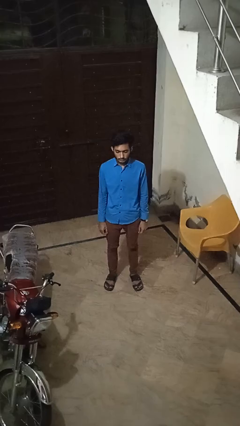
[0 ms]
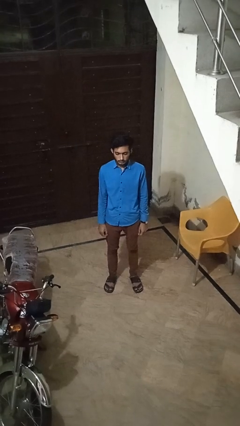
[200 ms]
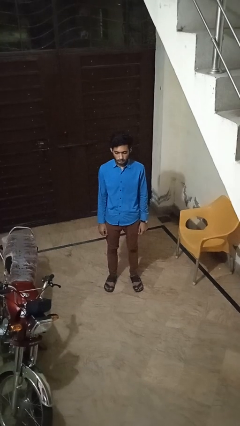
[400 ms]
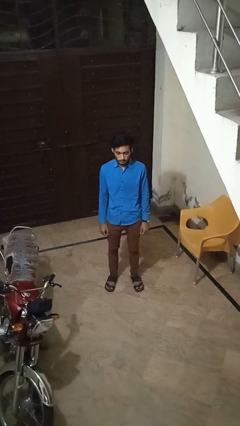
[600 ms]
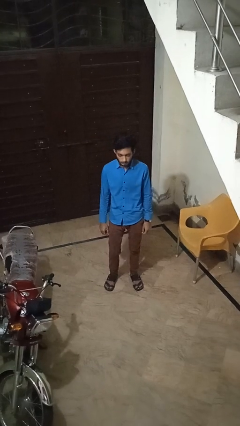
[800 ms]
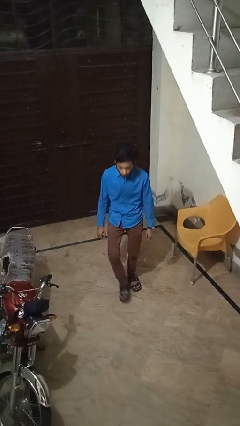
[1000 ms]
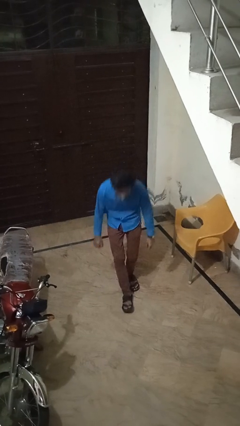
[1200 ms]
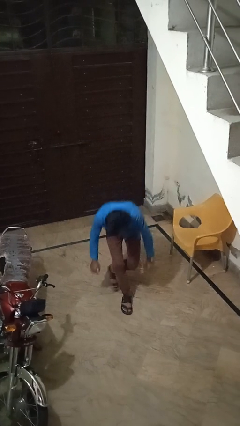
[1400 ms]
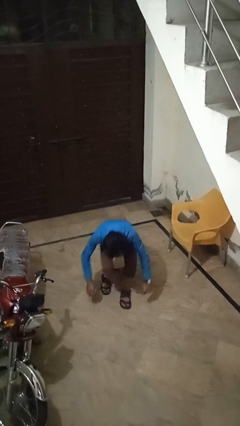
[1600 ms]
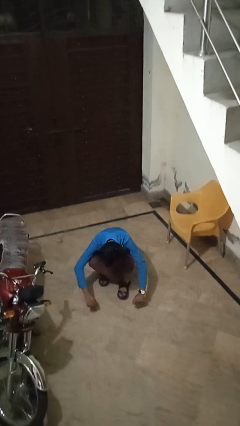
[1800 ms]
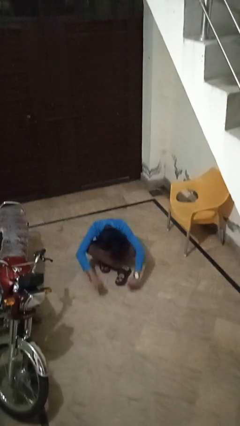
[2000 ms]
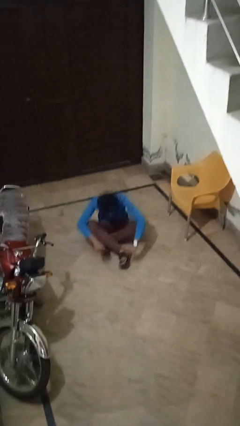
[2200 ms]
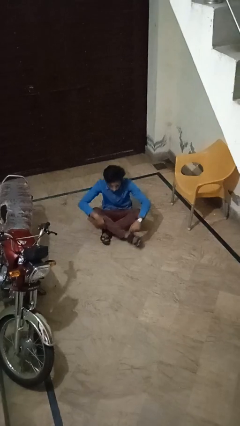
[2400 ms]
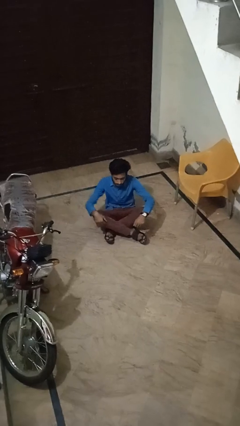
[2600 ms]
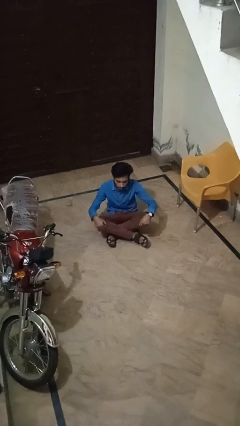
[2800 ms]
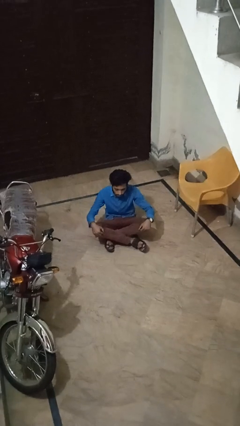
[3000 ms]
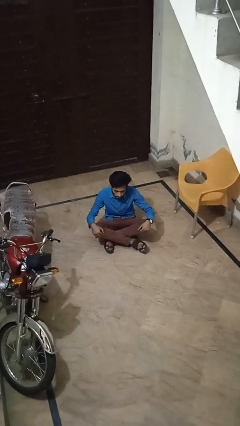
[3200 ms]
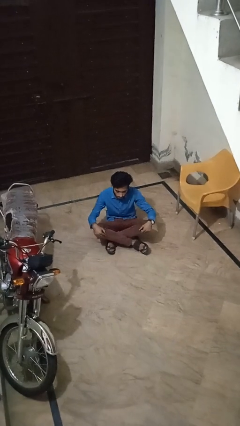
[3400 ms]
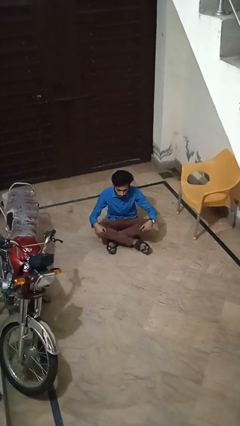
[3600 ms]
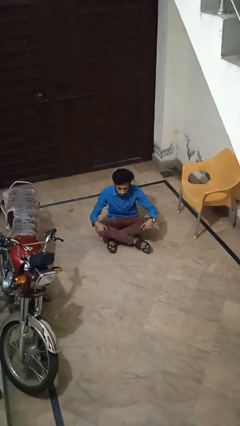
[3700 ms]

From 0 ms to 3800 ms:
person sits crisscross

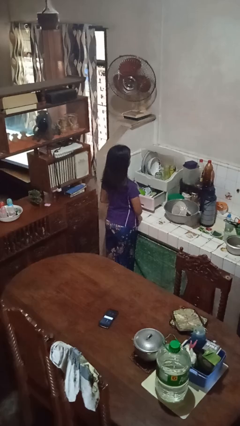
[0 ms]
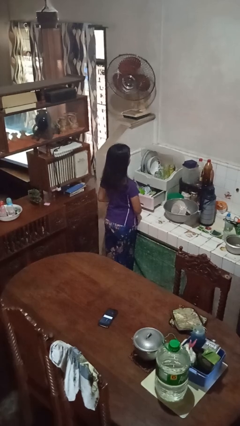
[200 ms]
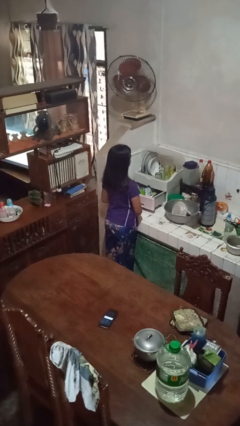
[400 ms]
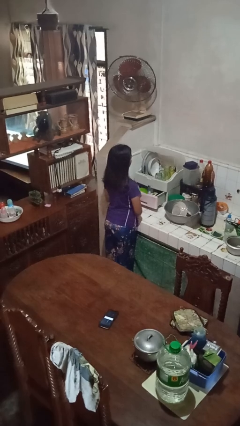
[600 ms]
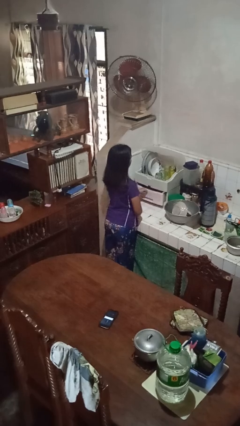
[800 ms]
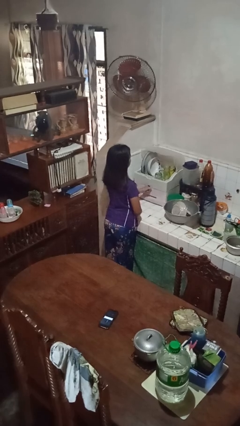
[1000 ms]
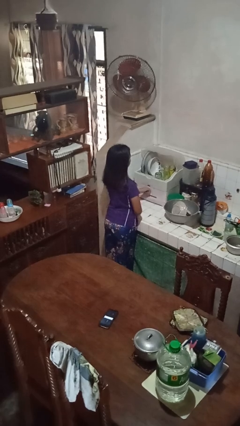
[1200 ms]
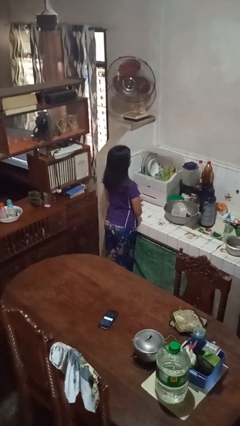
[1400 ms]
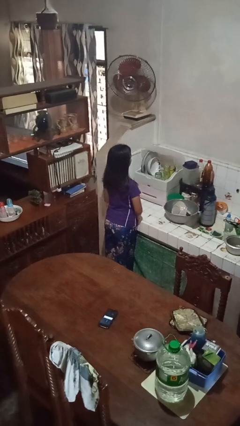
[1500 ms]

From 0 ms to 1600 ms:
person closes kitchen drawer

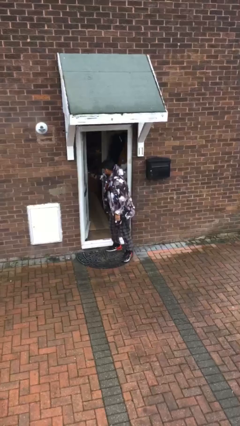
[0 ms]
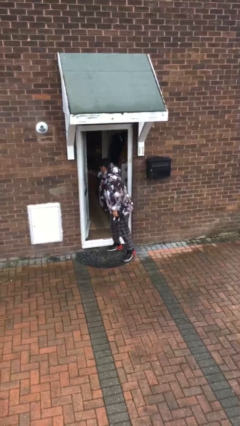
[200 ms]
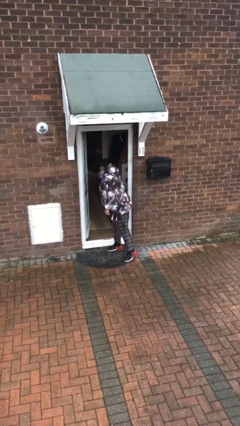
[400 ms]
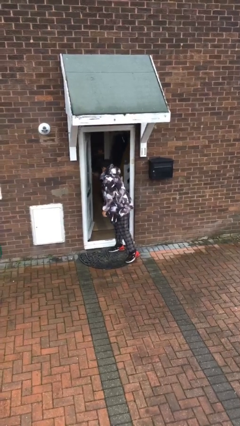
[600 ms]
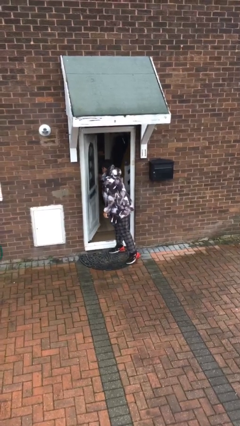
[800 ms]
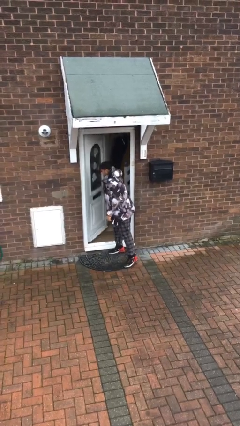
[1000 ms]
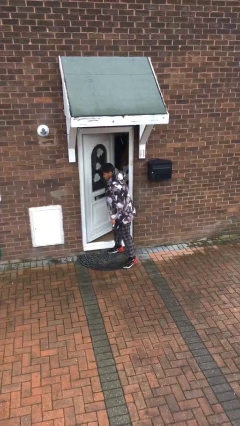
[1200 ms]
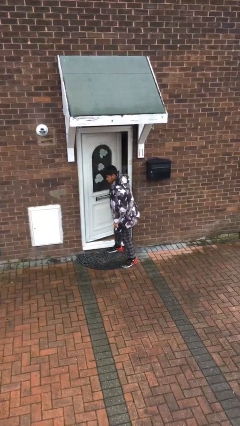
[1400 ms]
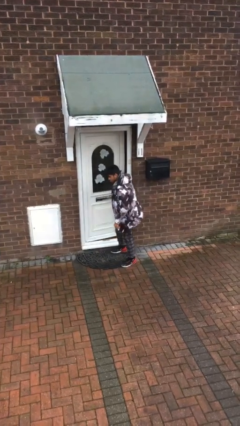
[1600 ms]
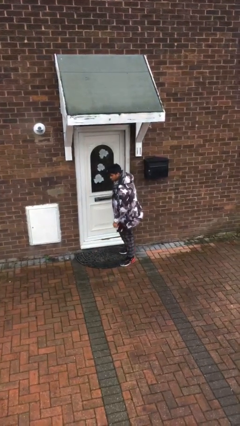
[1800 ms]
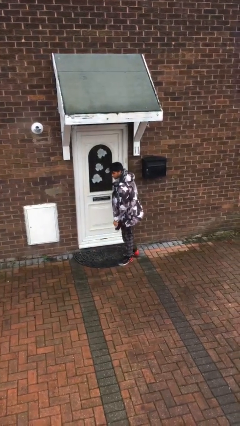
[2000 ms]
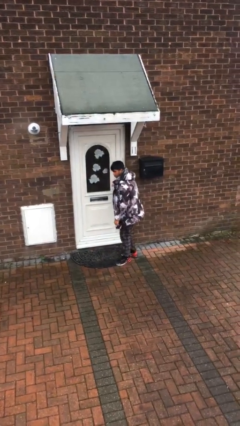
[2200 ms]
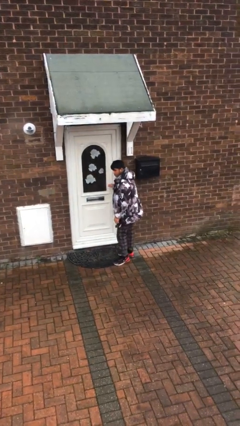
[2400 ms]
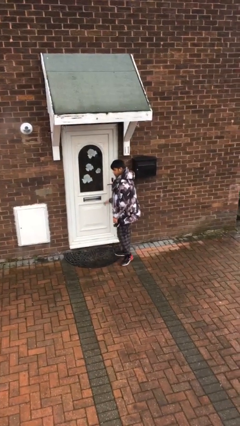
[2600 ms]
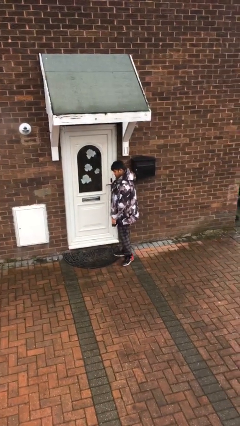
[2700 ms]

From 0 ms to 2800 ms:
person closes facility door

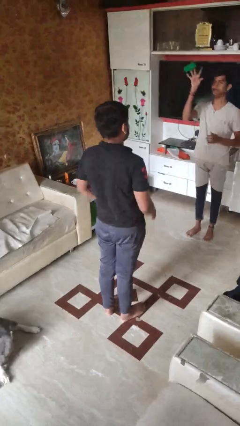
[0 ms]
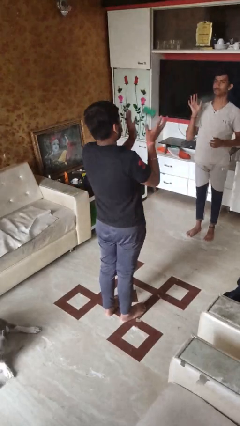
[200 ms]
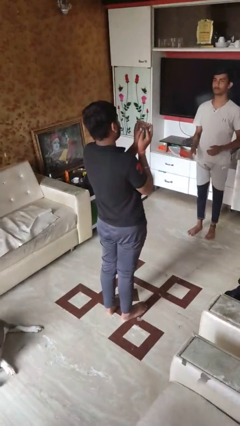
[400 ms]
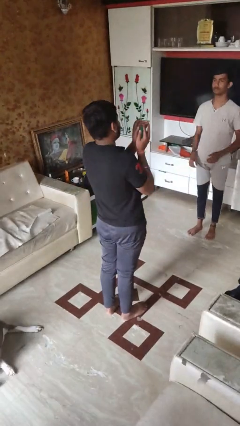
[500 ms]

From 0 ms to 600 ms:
person catches object from person

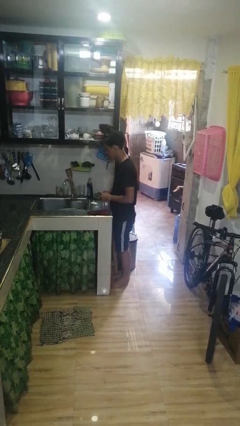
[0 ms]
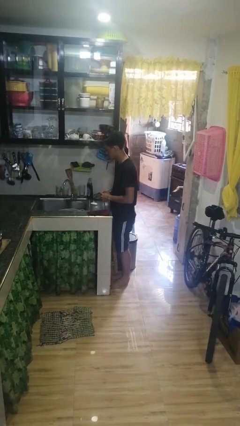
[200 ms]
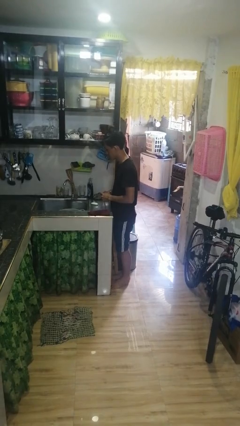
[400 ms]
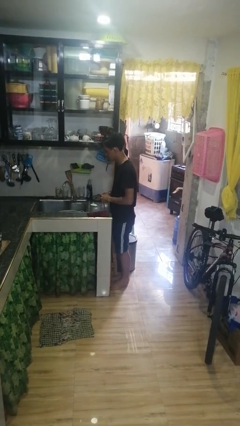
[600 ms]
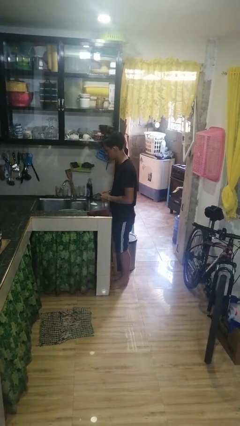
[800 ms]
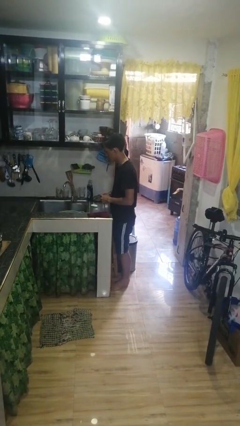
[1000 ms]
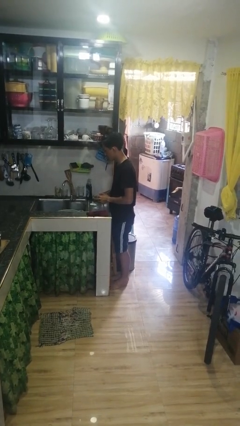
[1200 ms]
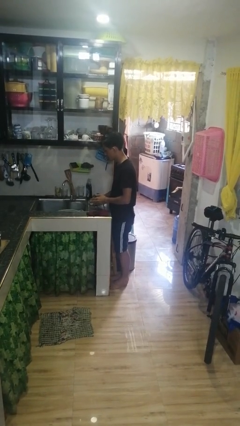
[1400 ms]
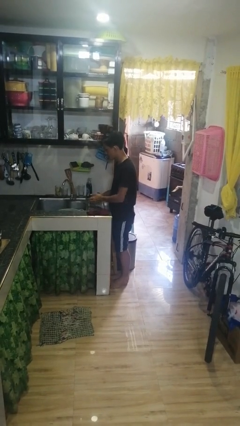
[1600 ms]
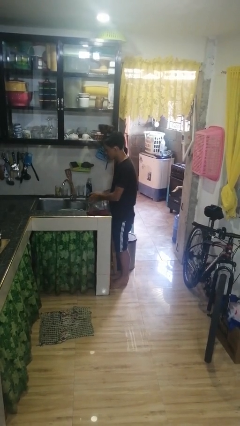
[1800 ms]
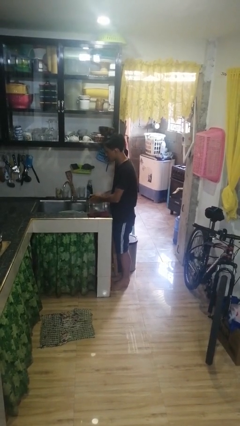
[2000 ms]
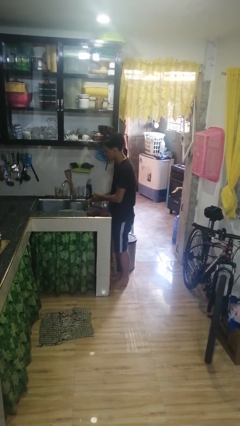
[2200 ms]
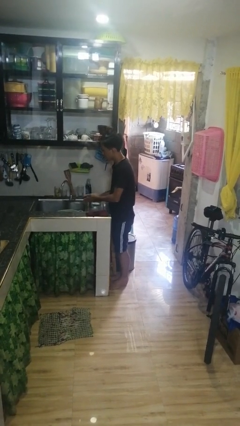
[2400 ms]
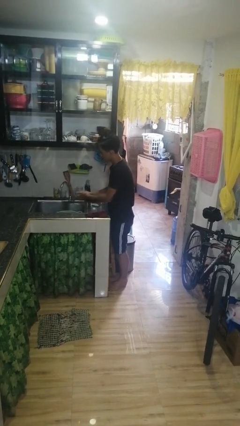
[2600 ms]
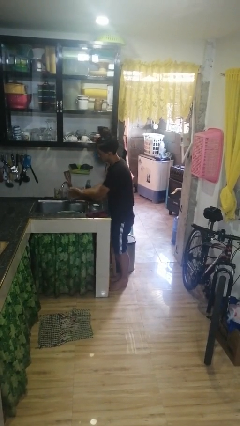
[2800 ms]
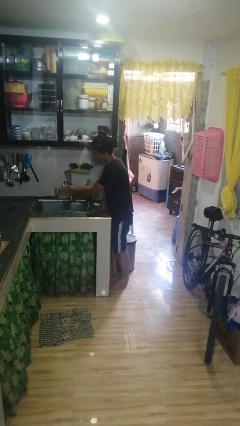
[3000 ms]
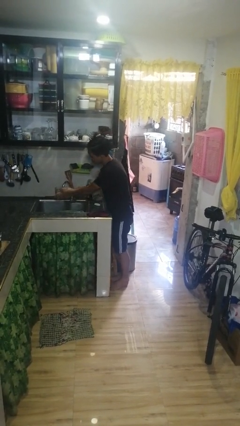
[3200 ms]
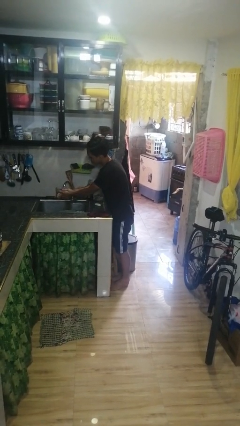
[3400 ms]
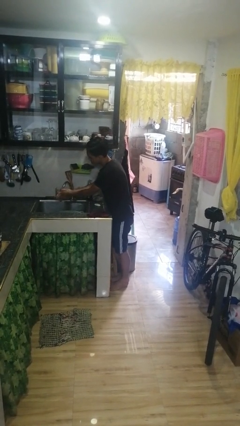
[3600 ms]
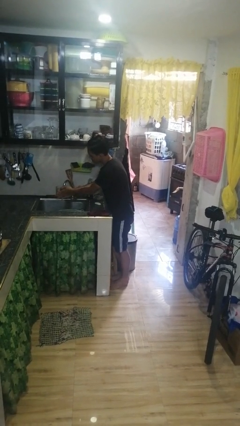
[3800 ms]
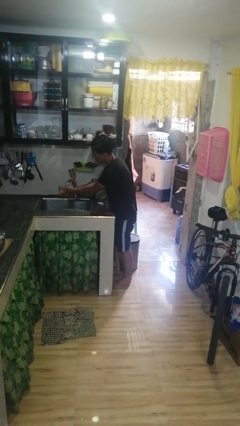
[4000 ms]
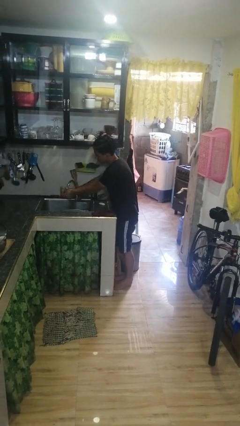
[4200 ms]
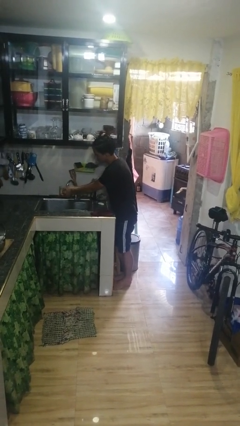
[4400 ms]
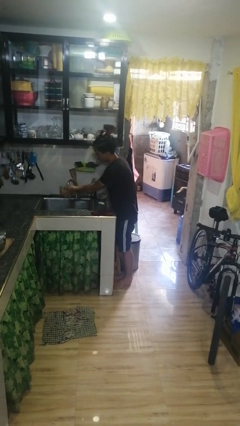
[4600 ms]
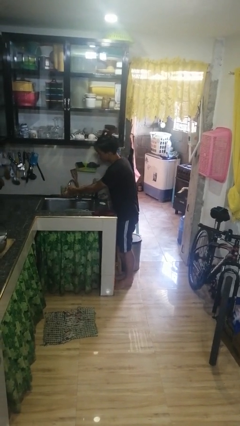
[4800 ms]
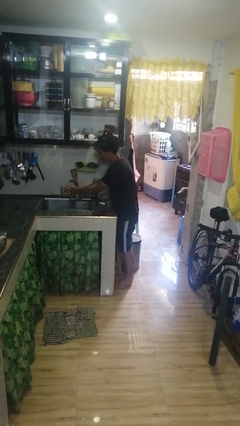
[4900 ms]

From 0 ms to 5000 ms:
person washes hands

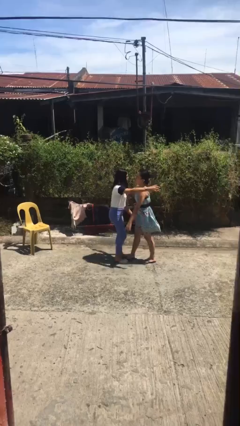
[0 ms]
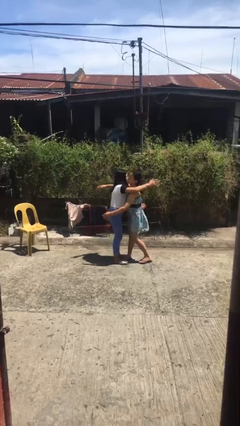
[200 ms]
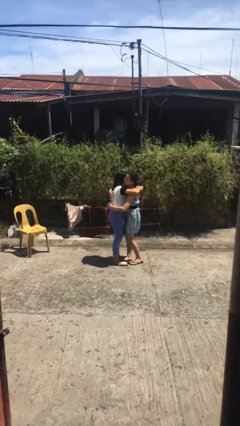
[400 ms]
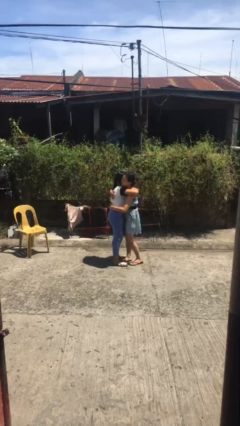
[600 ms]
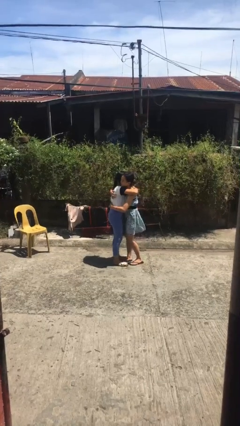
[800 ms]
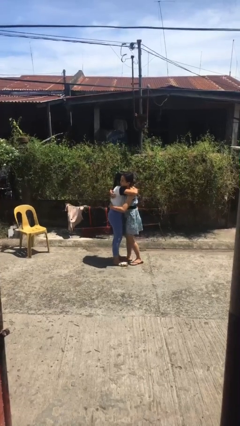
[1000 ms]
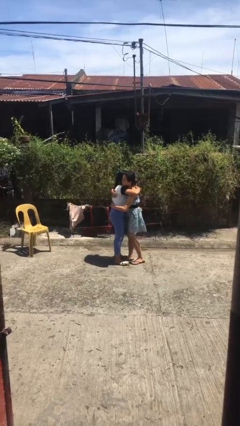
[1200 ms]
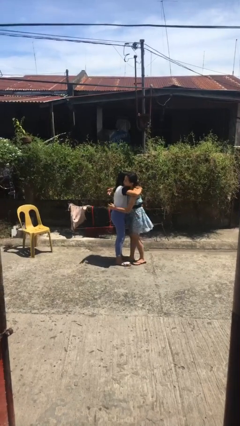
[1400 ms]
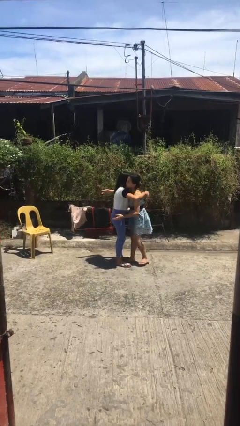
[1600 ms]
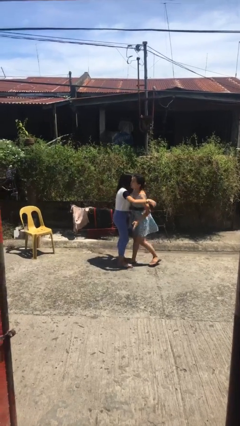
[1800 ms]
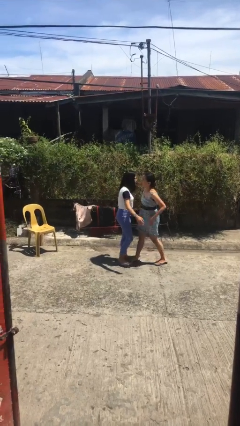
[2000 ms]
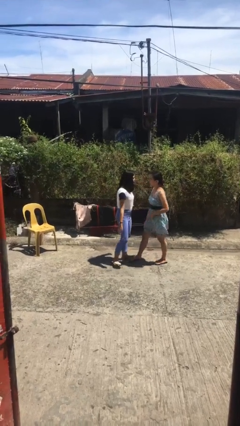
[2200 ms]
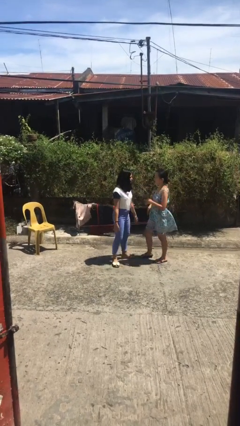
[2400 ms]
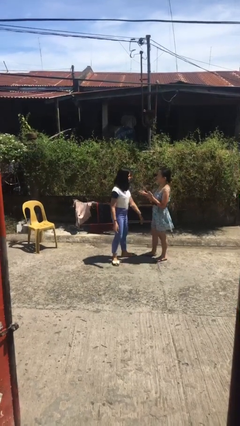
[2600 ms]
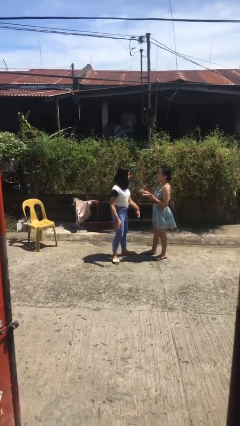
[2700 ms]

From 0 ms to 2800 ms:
person embraces person

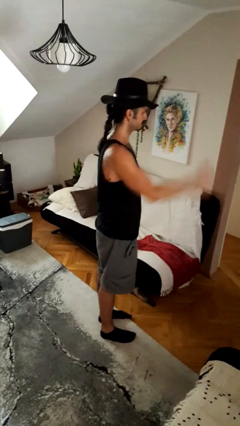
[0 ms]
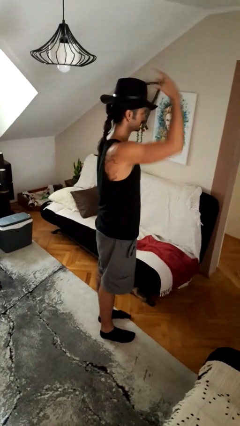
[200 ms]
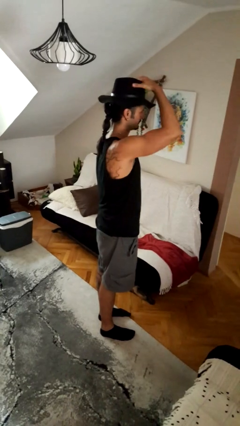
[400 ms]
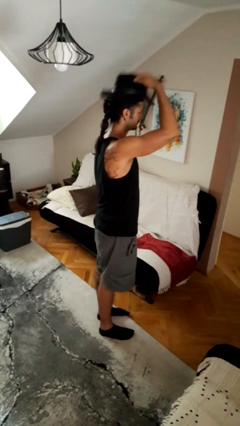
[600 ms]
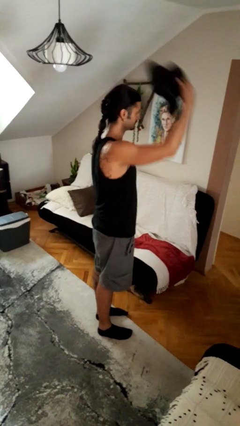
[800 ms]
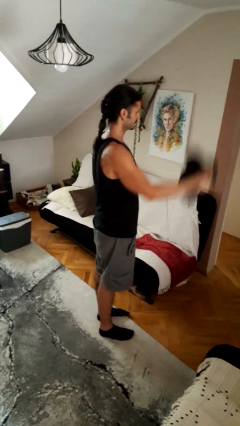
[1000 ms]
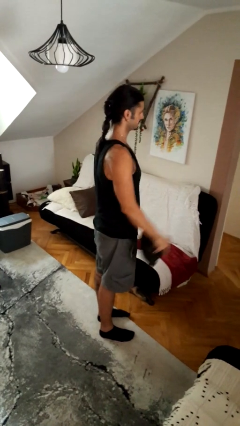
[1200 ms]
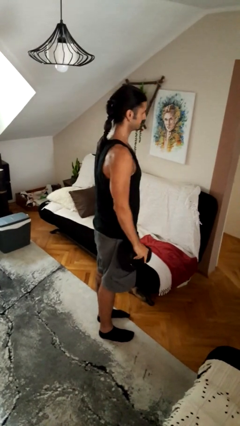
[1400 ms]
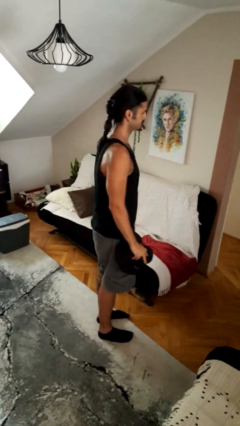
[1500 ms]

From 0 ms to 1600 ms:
person takes off hat
